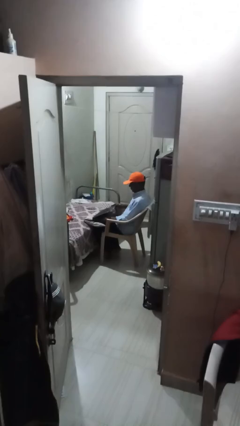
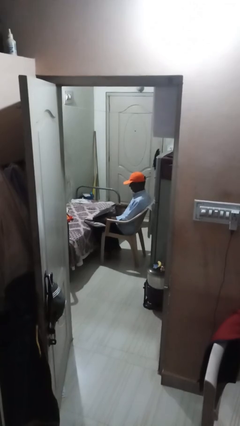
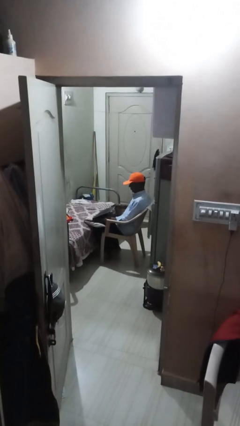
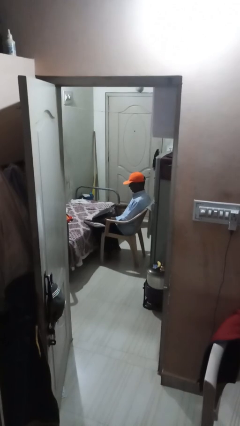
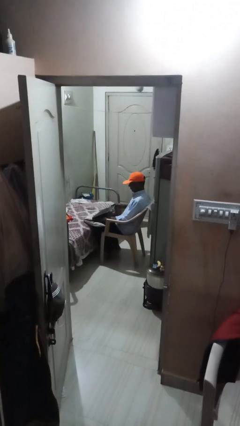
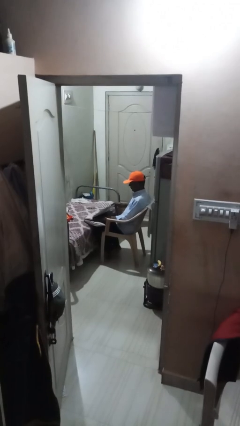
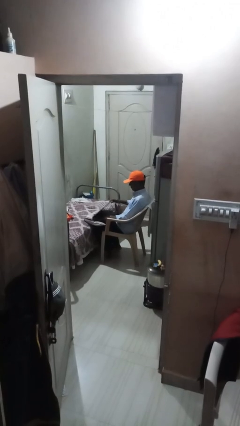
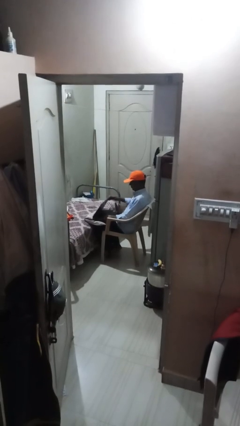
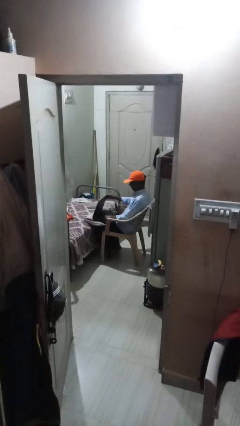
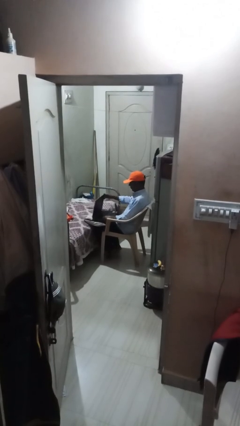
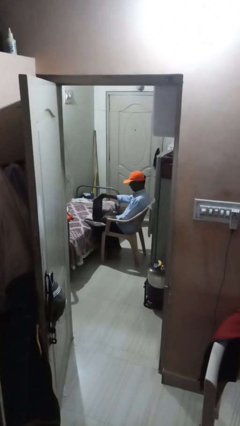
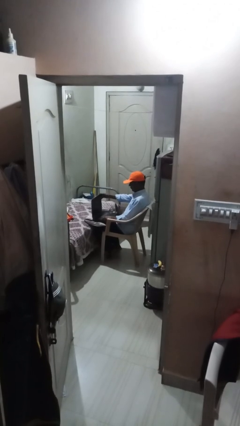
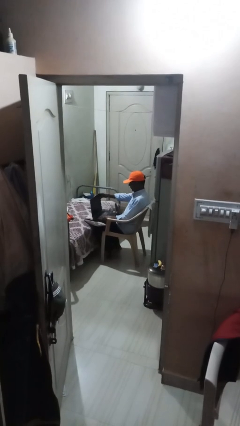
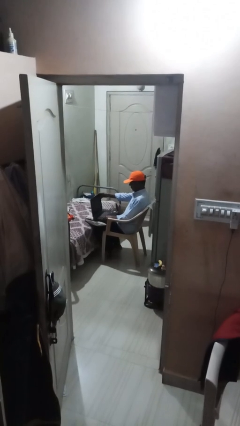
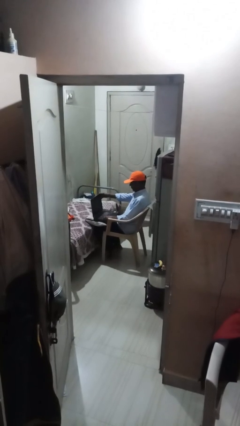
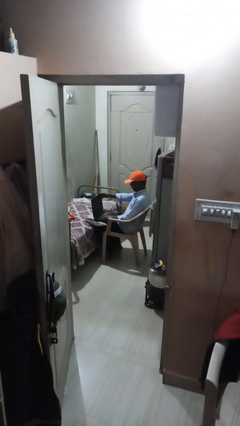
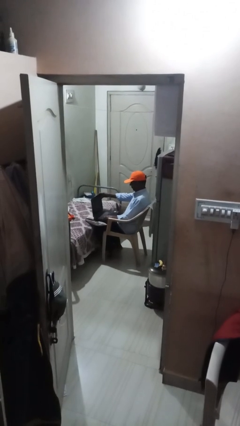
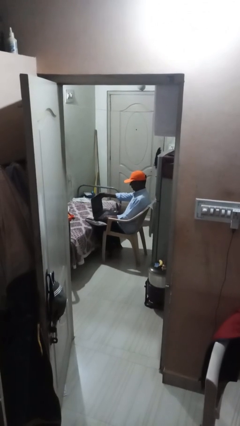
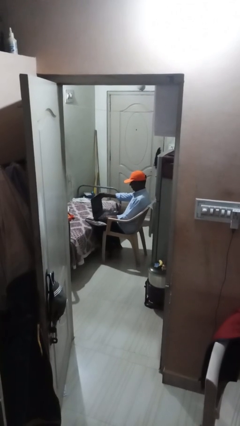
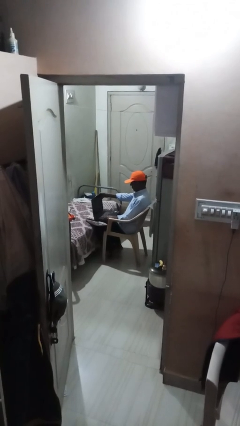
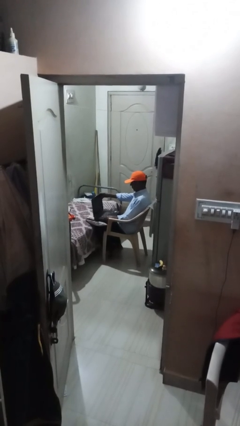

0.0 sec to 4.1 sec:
person interacts with laptop

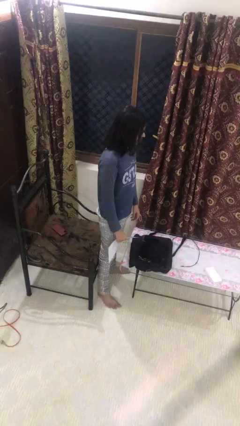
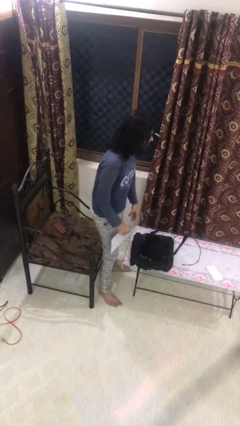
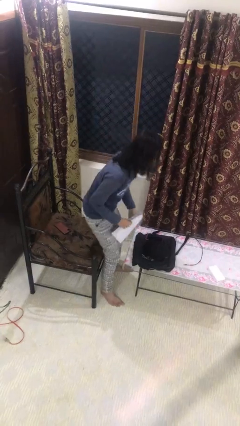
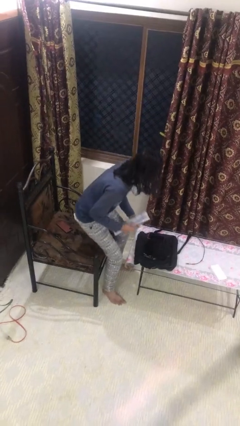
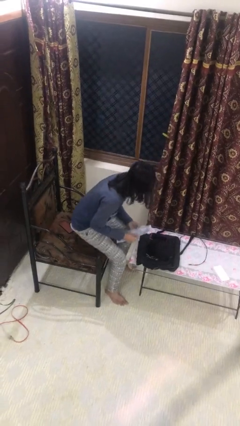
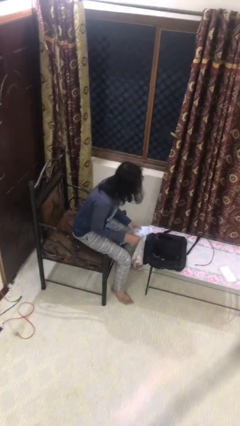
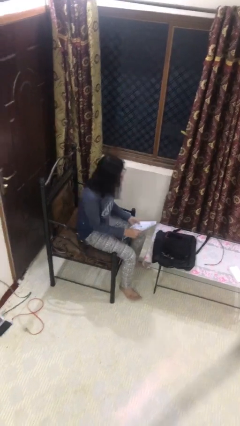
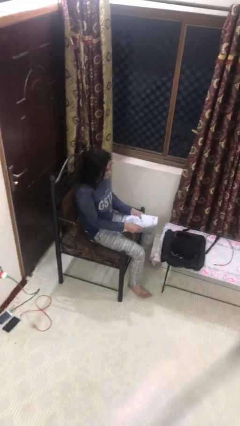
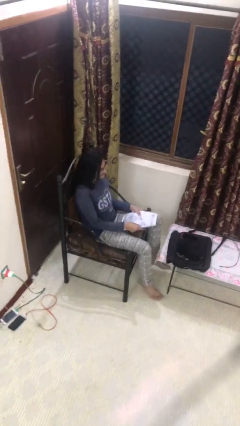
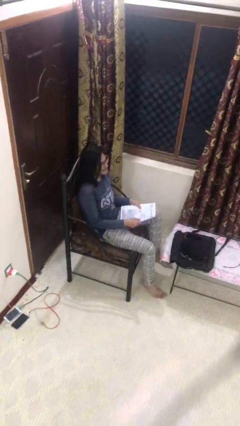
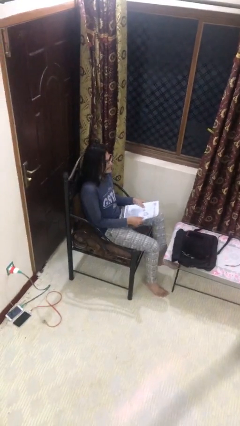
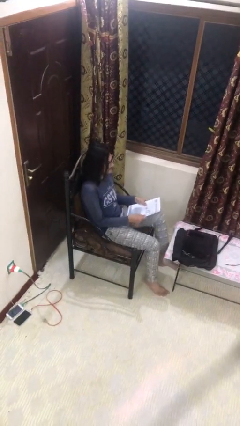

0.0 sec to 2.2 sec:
person sits down

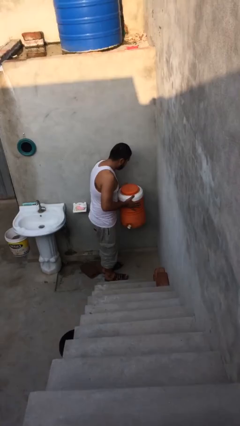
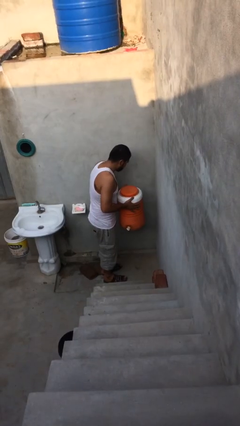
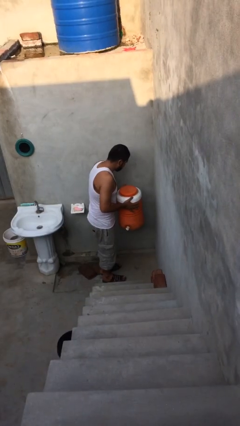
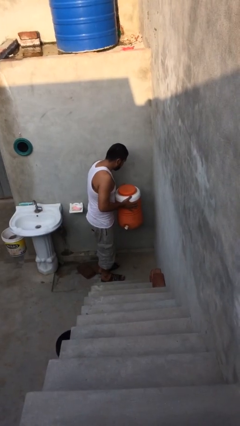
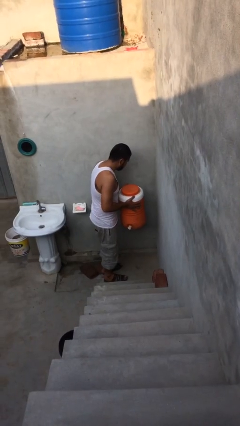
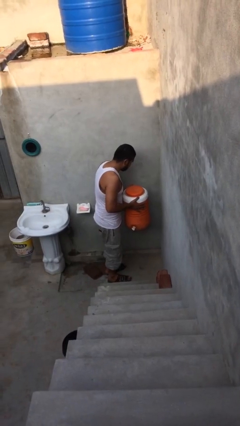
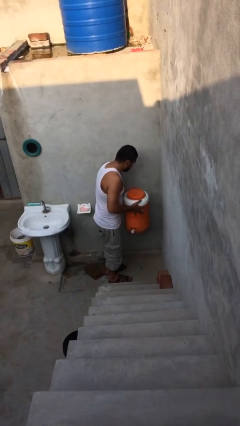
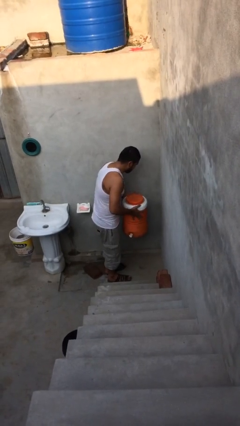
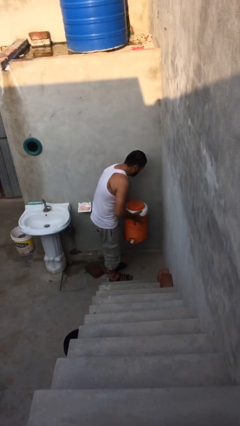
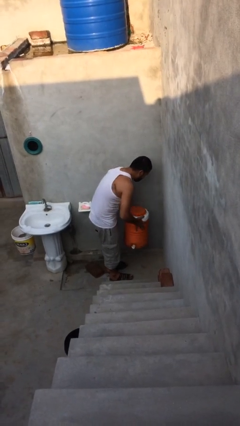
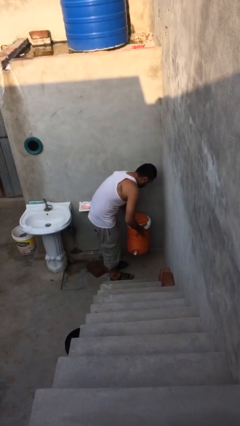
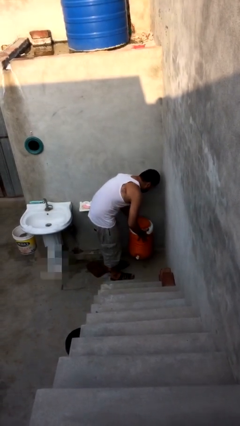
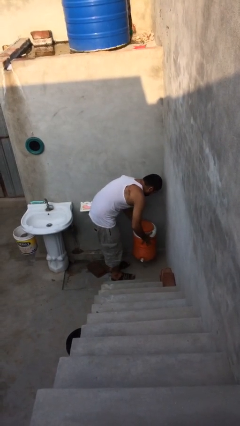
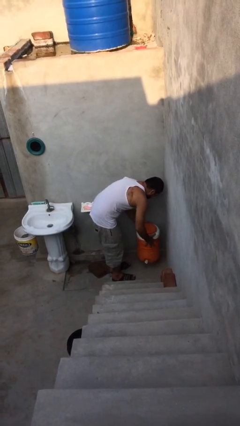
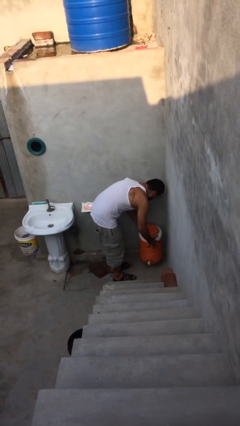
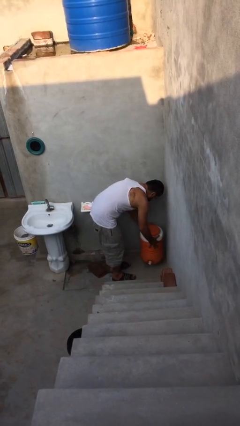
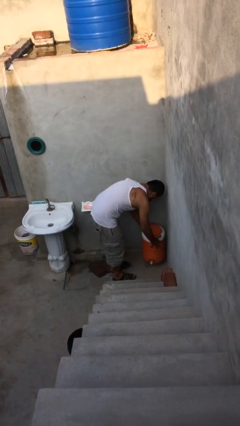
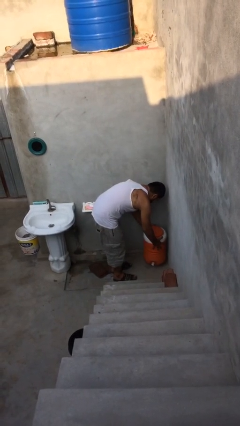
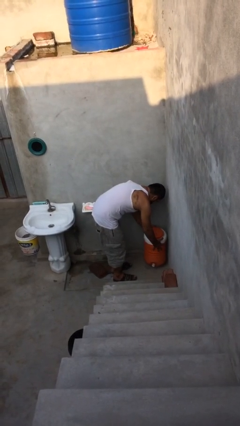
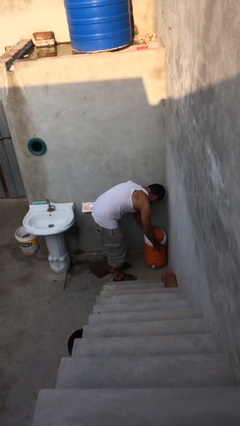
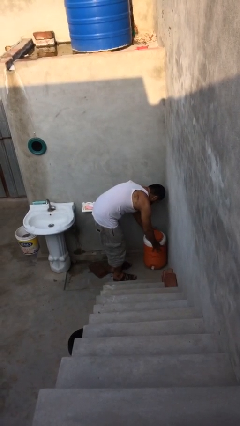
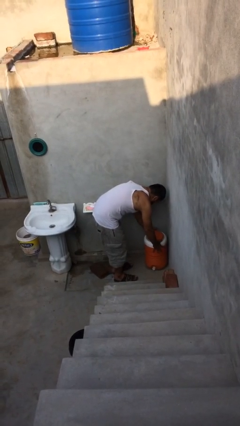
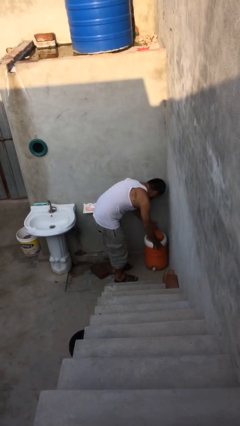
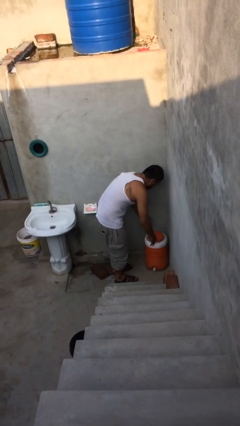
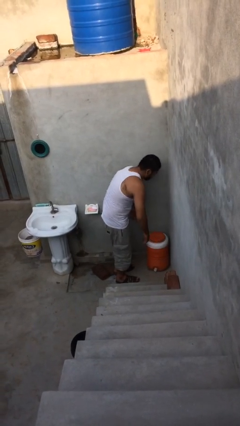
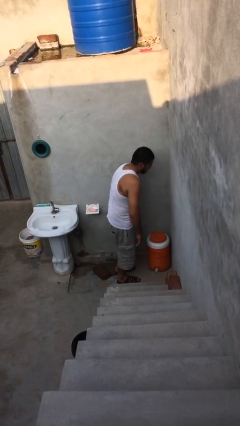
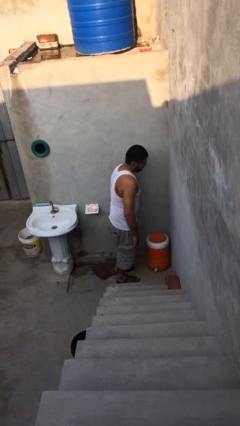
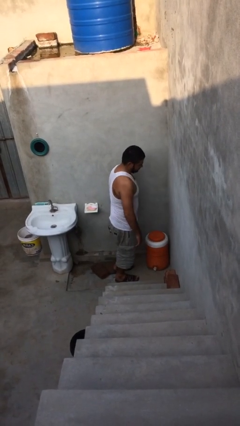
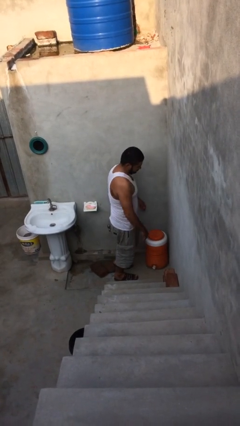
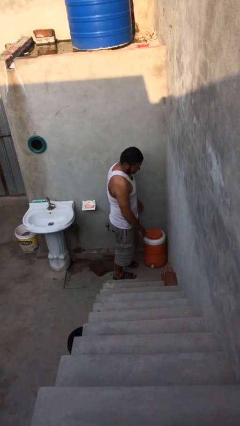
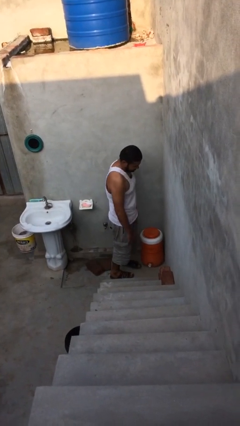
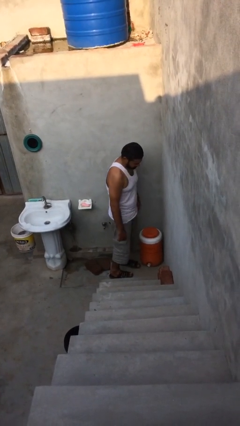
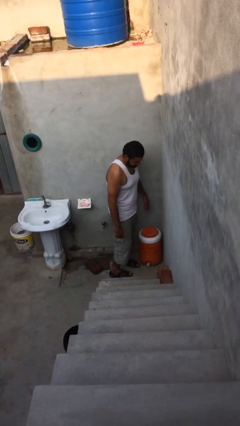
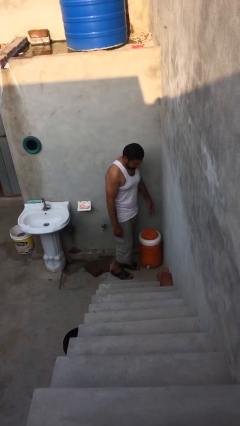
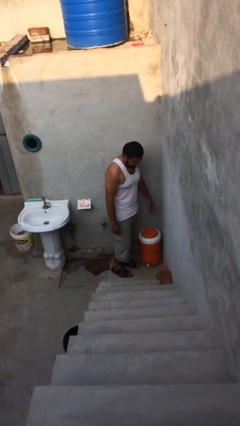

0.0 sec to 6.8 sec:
person puts down object on floor

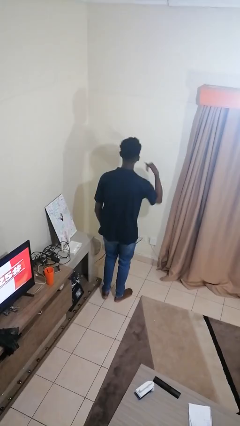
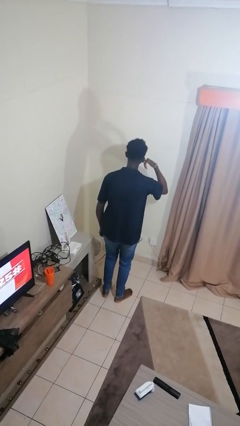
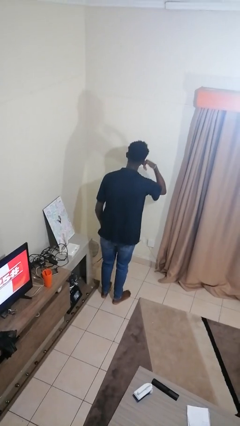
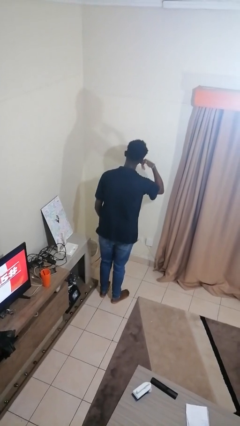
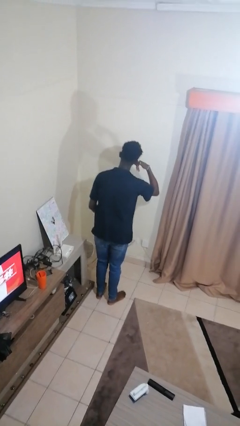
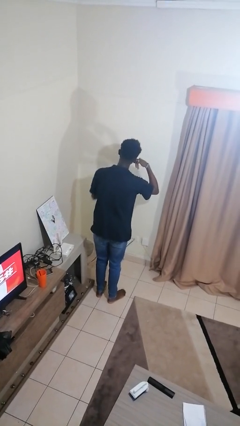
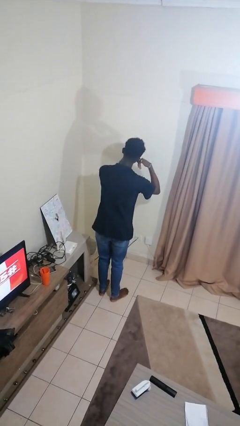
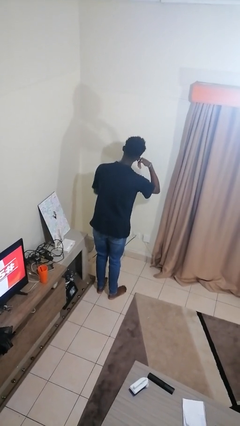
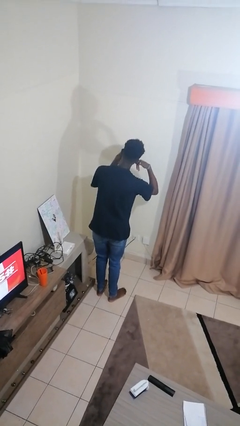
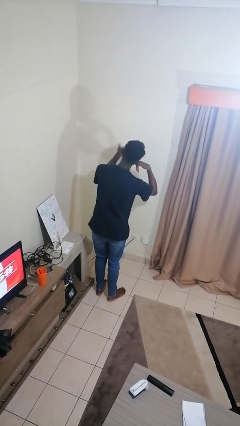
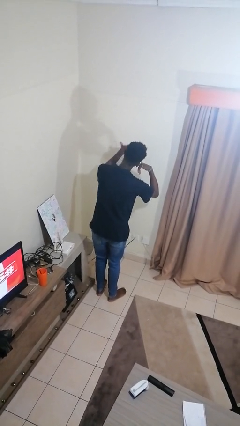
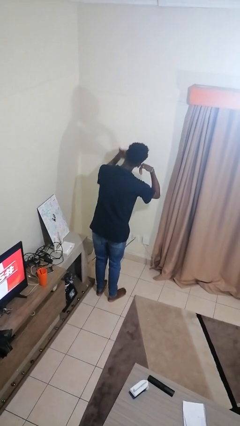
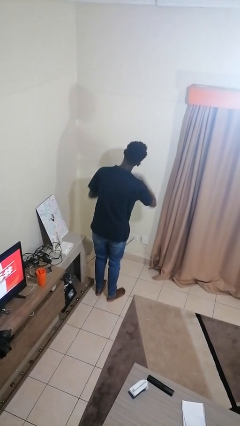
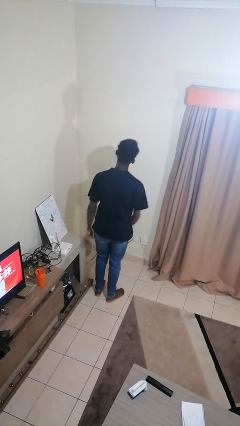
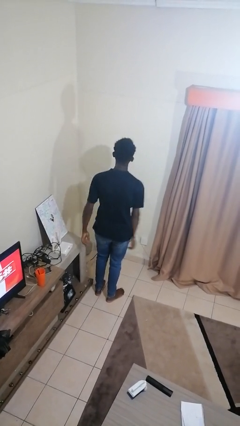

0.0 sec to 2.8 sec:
person gestures call me

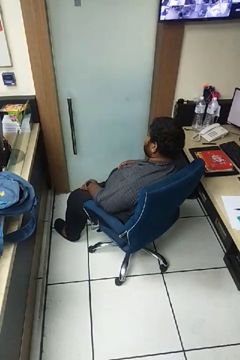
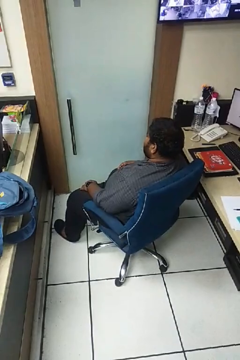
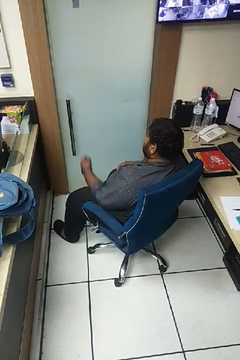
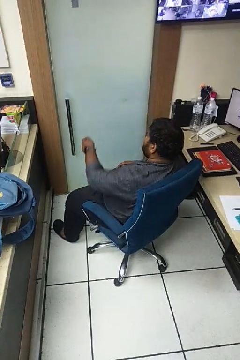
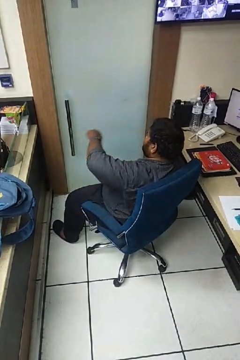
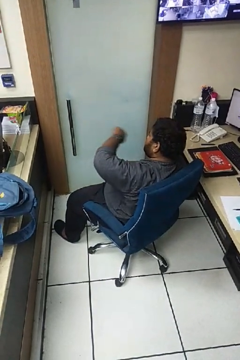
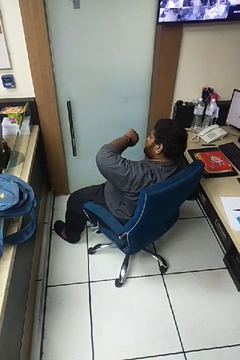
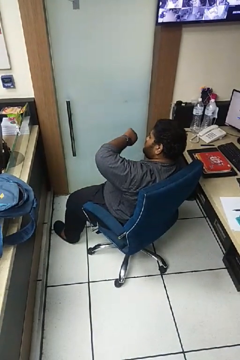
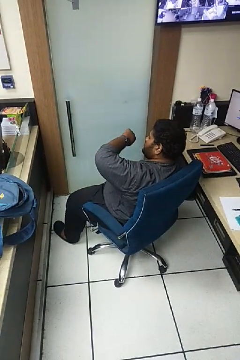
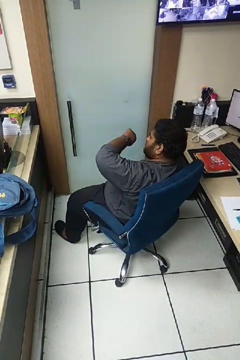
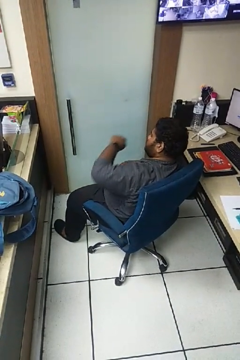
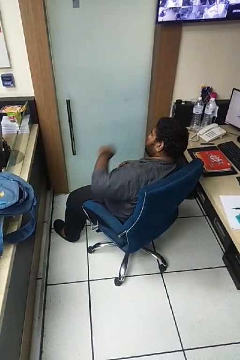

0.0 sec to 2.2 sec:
person looks at wristwatch
